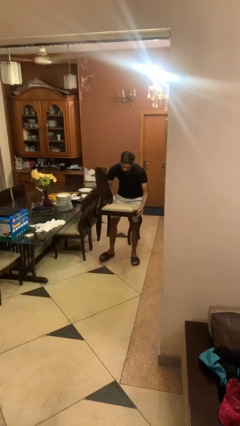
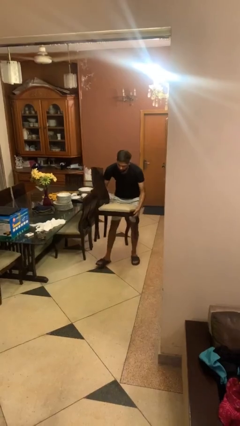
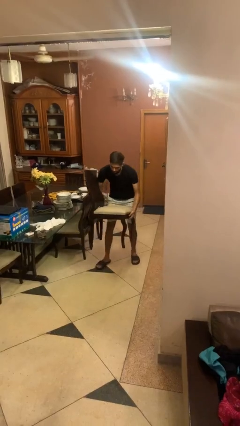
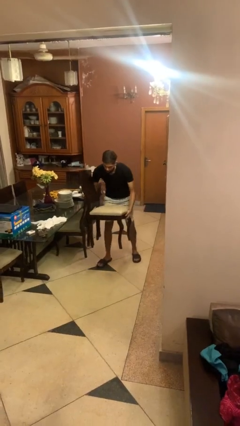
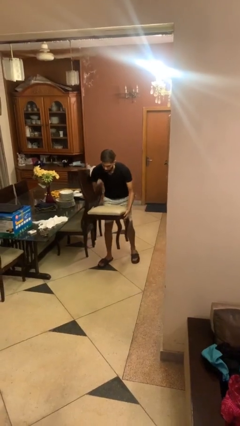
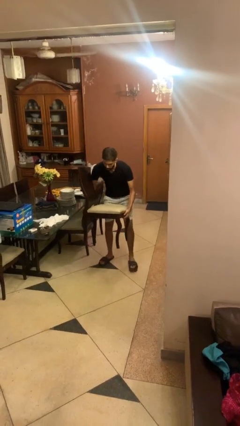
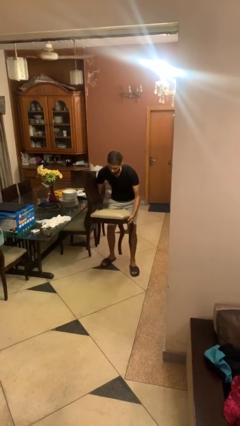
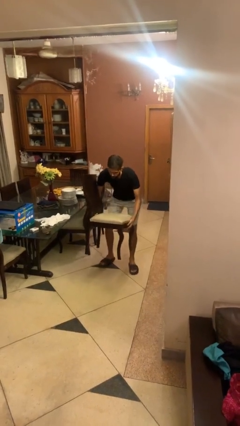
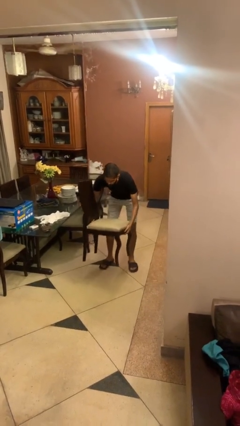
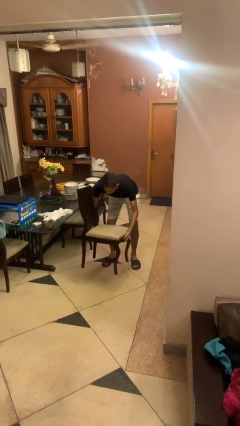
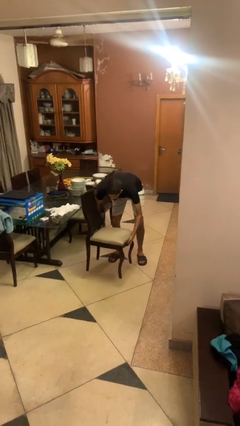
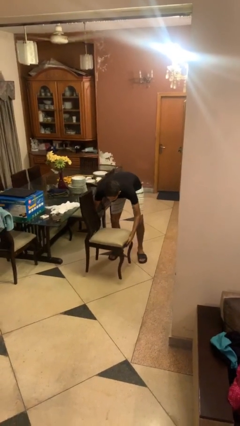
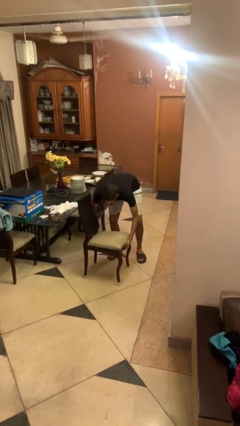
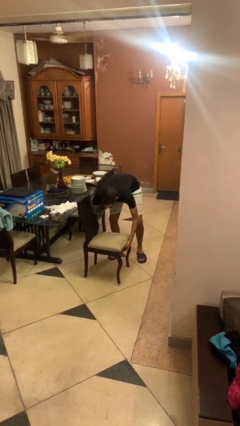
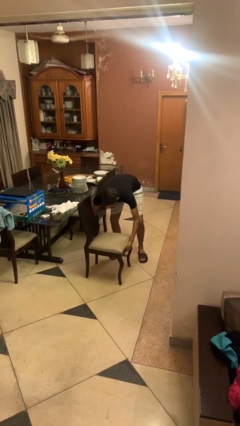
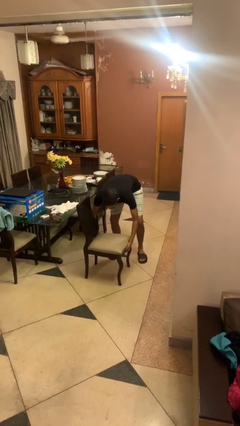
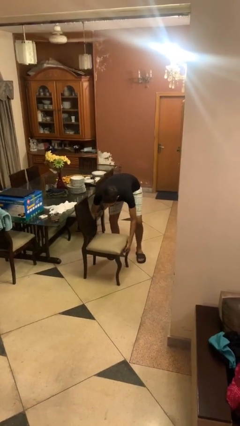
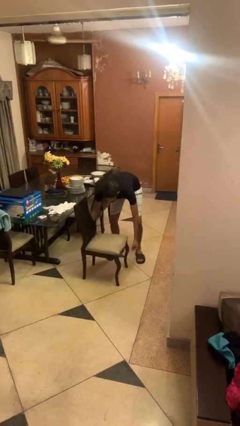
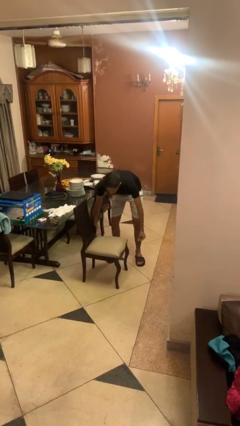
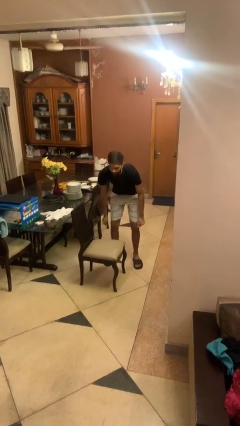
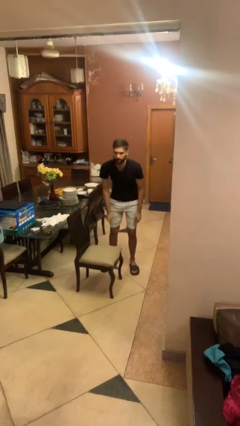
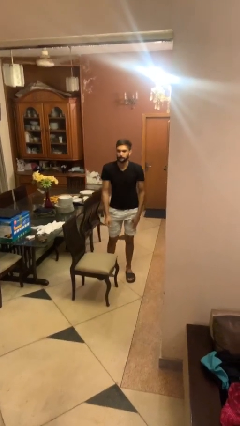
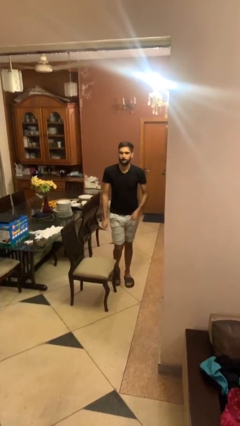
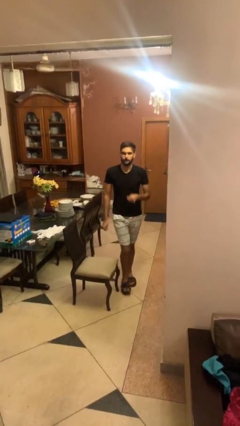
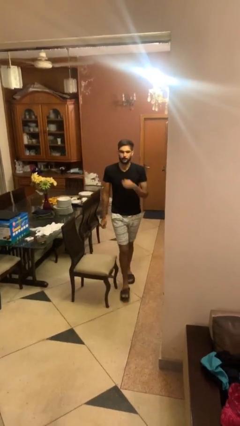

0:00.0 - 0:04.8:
person puts down object on floor

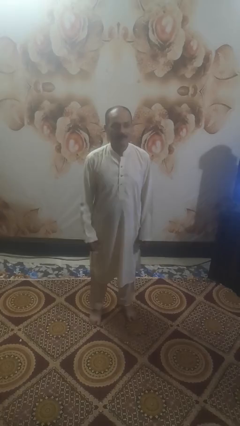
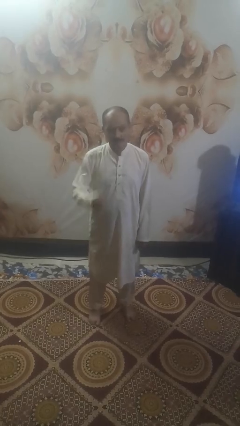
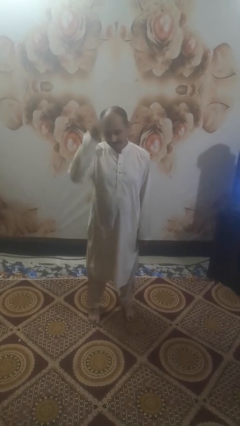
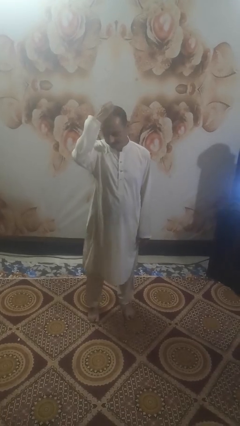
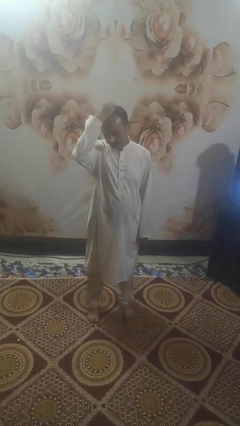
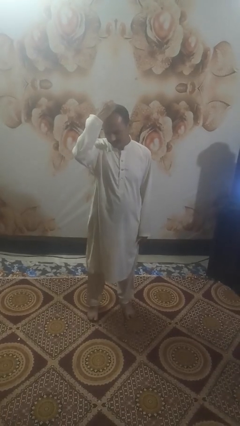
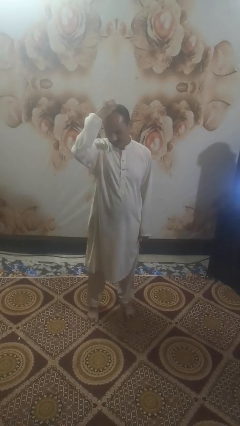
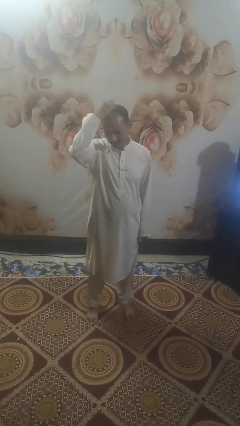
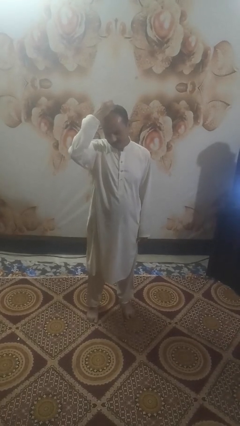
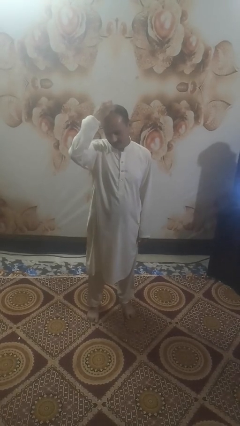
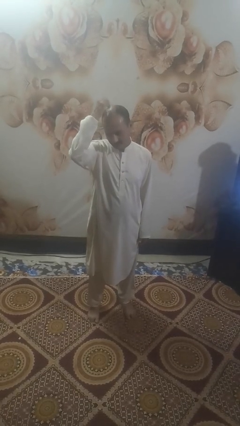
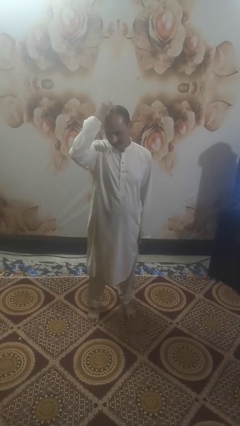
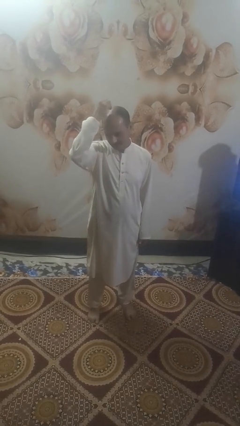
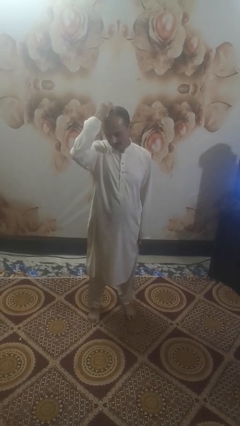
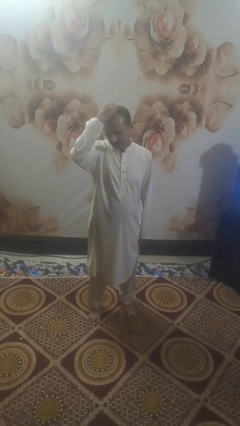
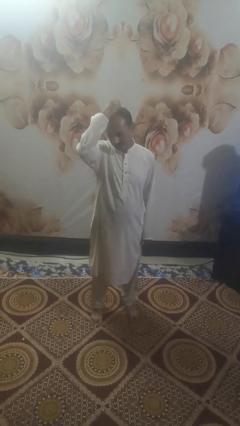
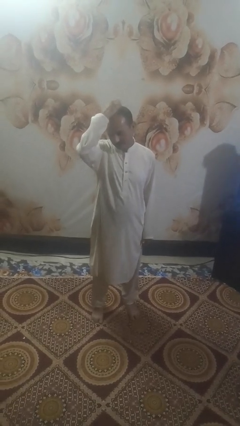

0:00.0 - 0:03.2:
person scratches face

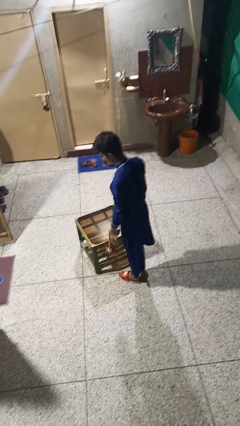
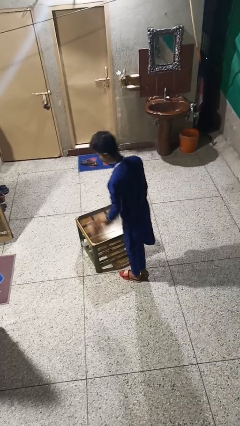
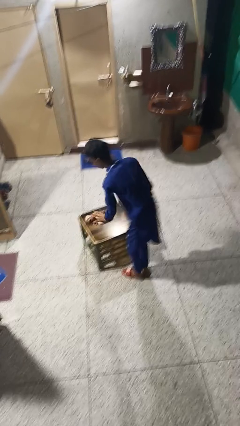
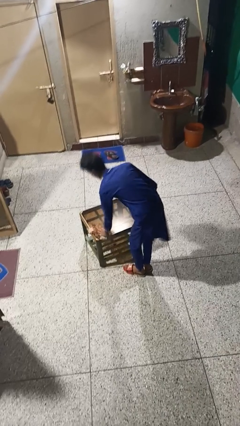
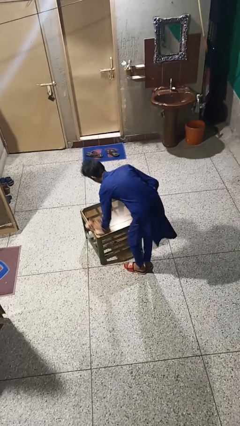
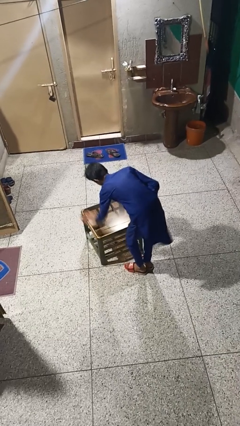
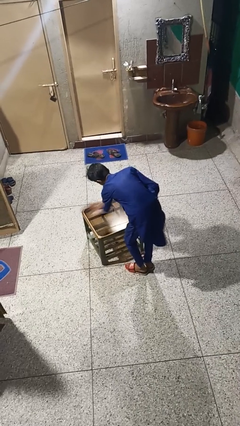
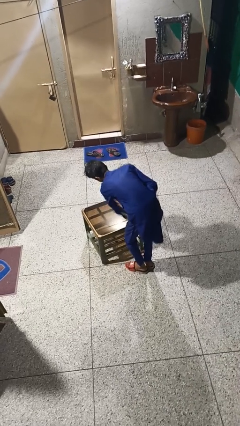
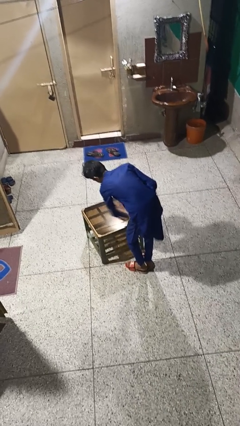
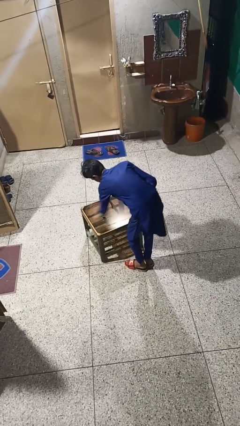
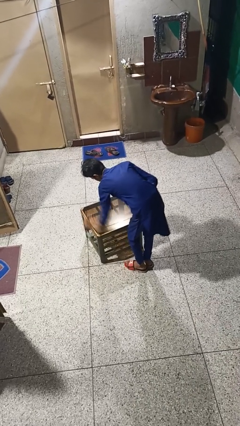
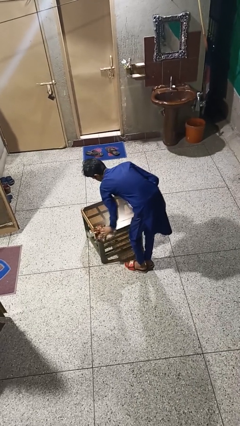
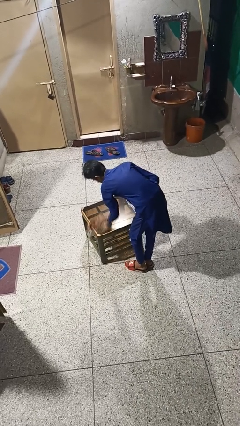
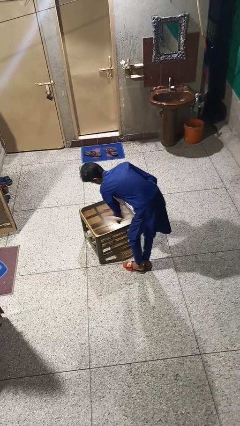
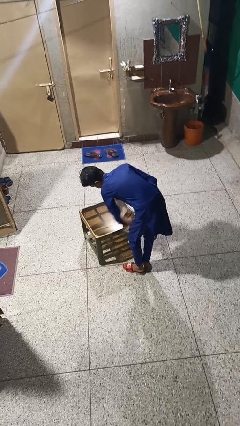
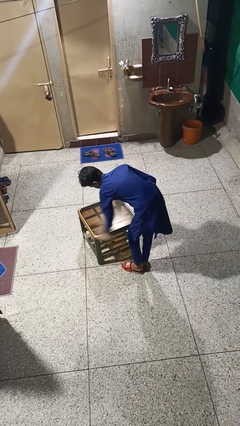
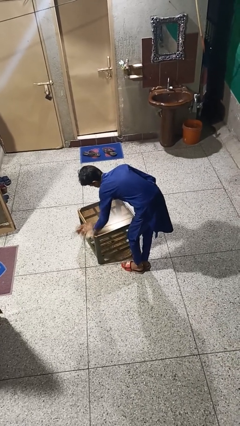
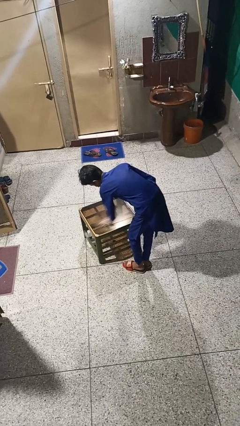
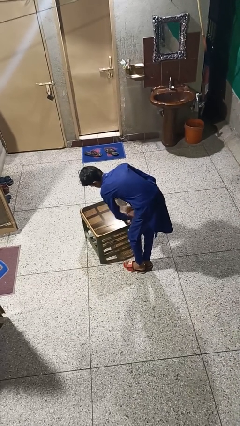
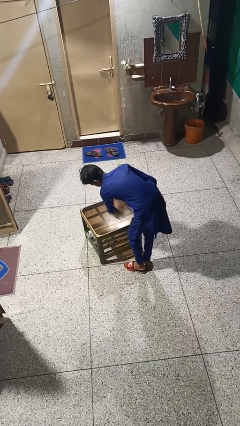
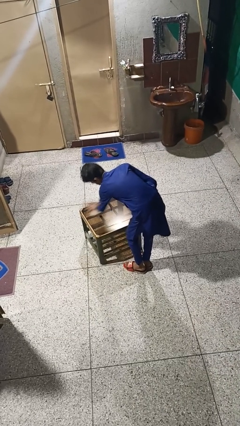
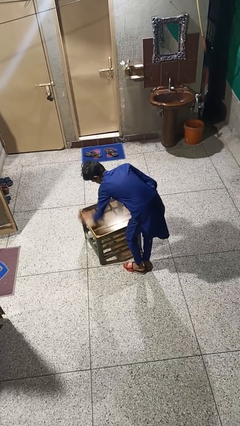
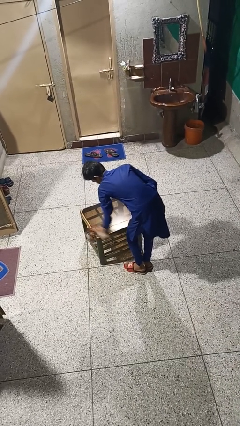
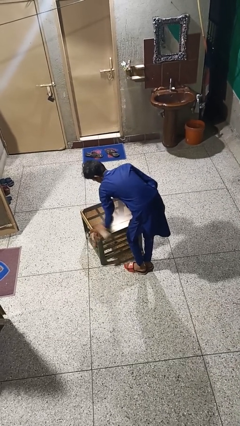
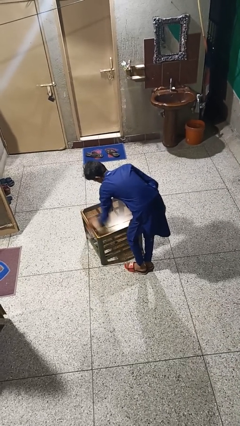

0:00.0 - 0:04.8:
person cleans table with rag

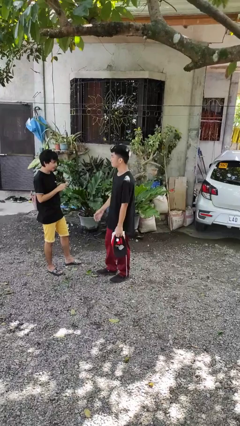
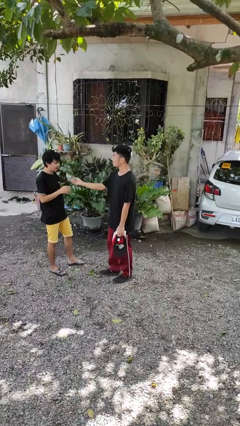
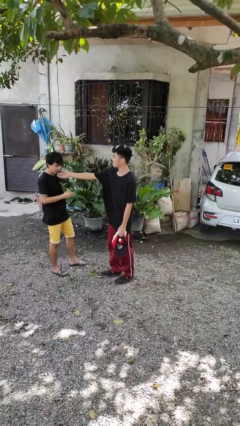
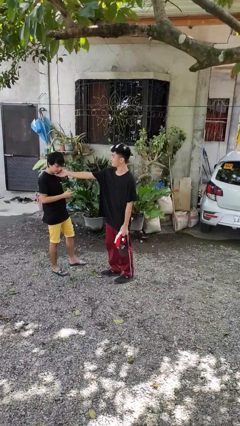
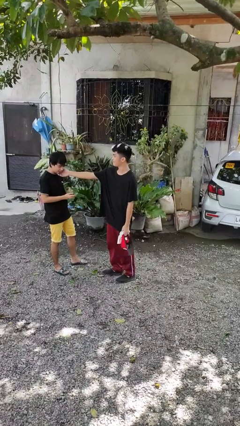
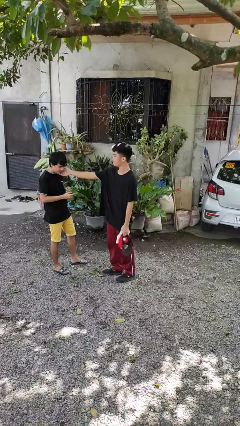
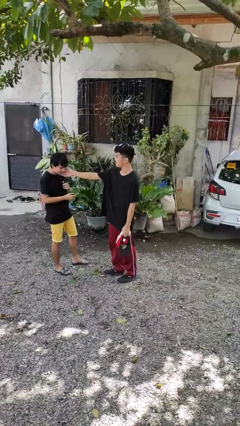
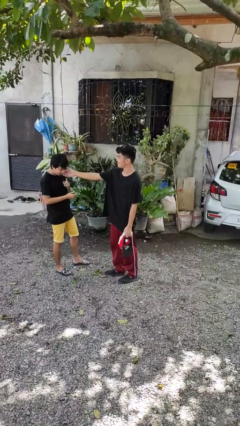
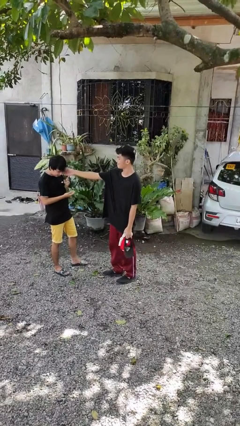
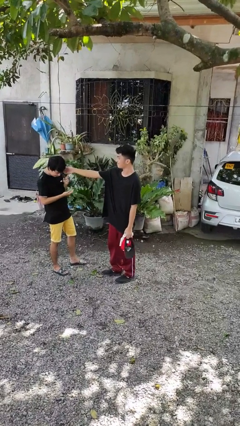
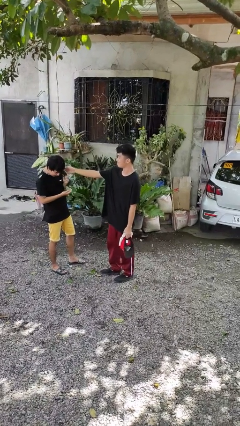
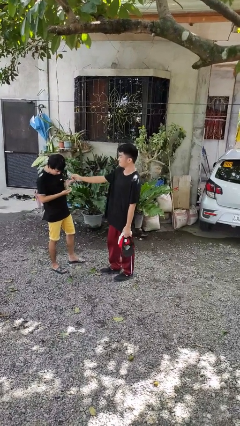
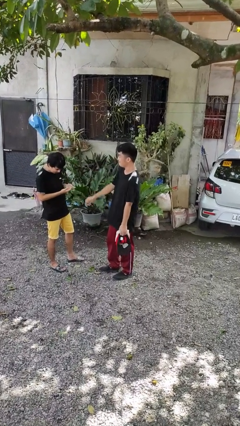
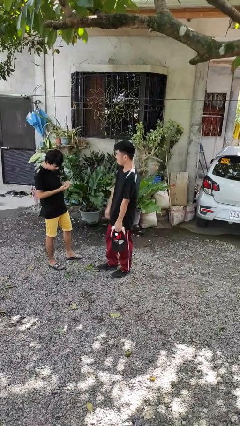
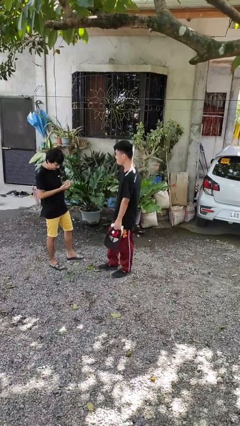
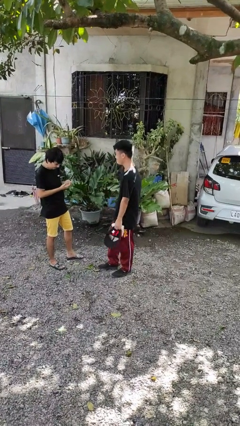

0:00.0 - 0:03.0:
person touches face of person

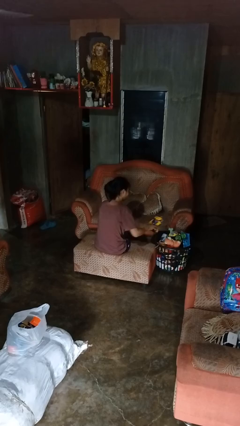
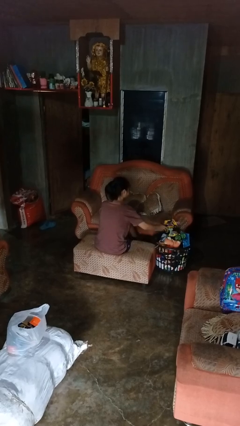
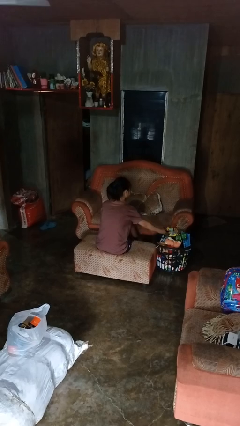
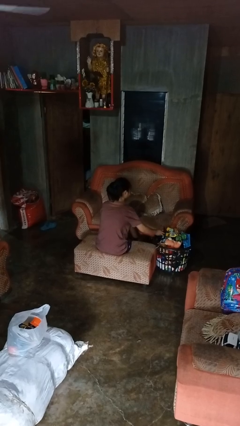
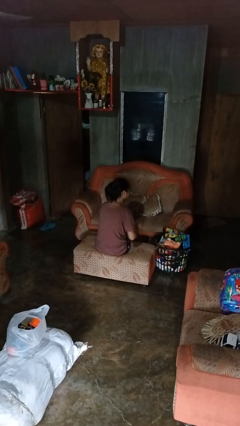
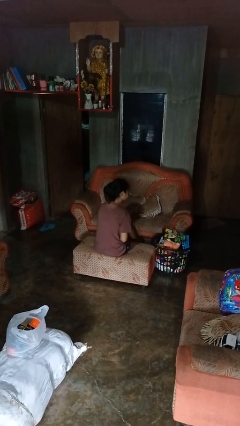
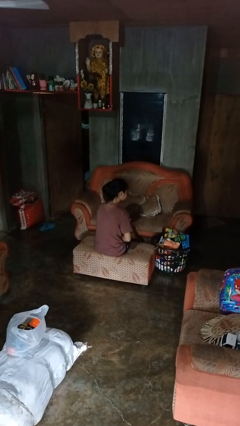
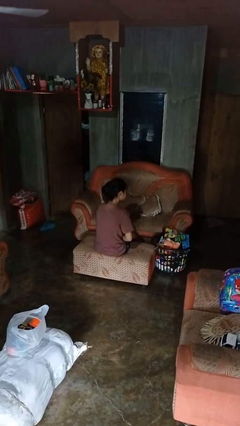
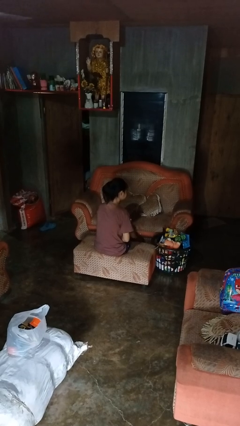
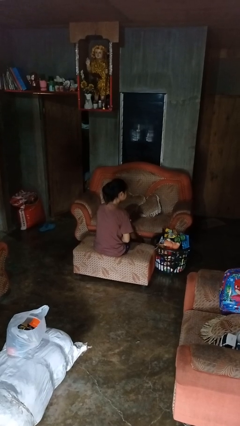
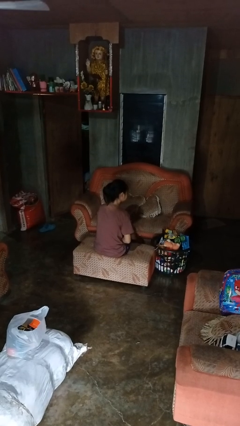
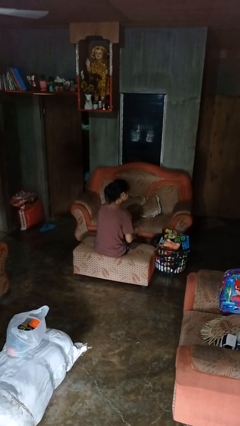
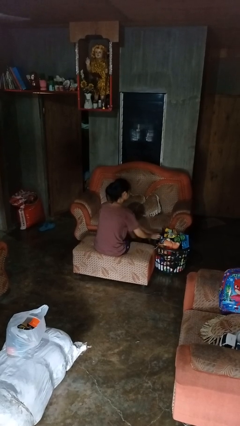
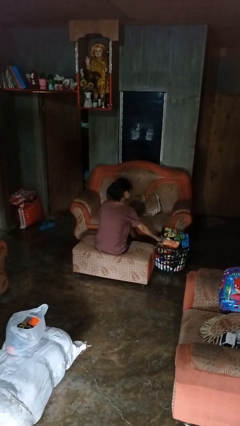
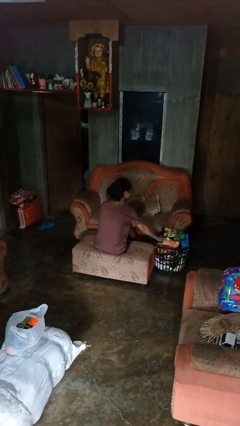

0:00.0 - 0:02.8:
person puts object into basket
